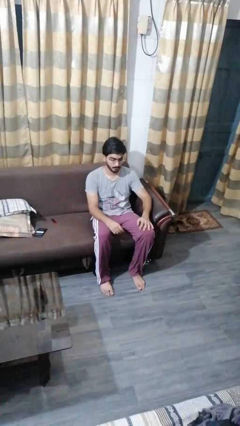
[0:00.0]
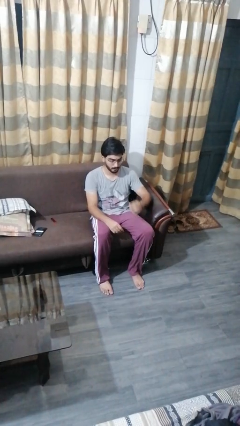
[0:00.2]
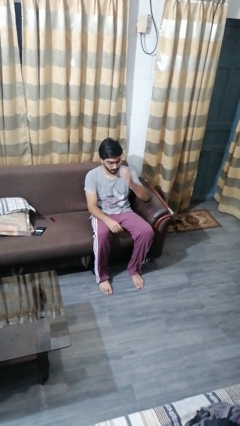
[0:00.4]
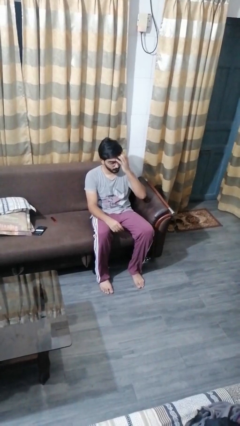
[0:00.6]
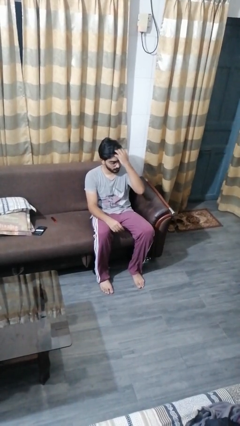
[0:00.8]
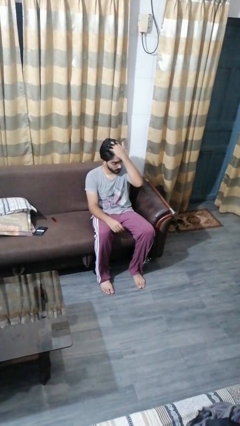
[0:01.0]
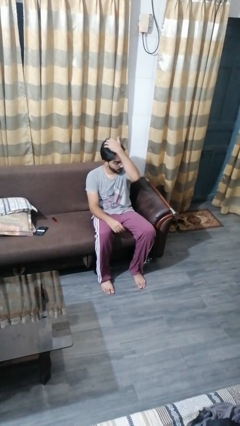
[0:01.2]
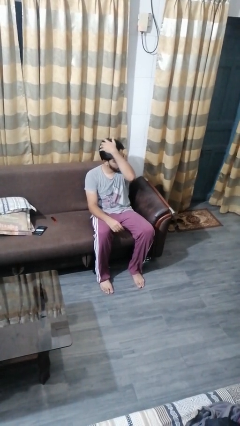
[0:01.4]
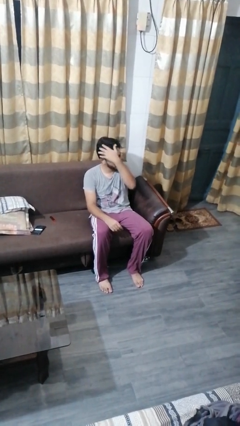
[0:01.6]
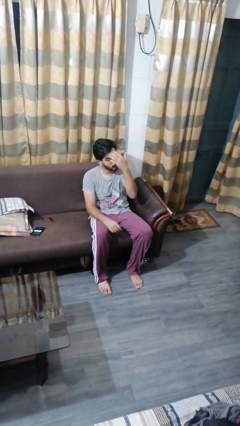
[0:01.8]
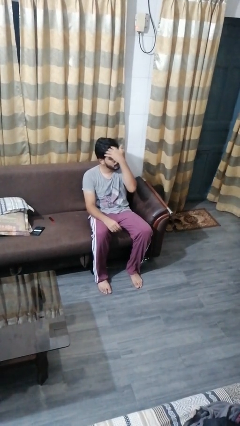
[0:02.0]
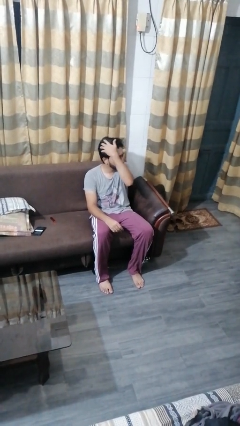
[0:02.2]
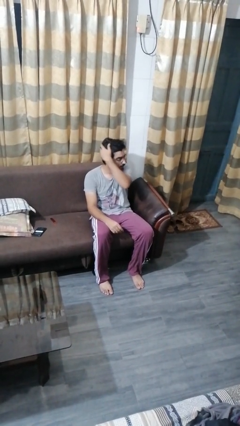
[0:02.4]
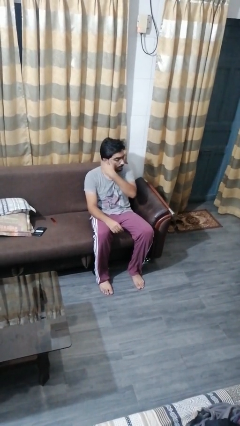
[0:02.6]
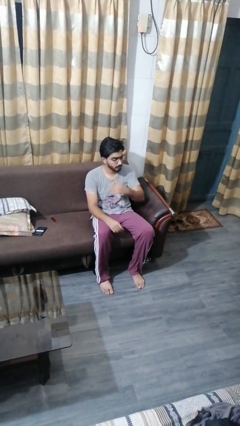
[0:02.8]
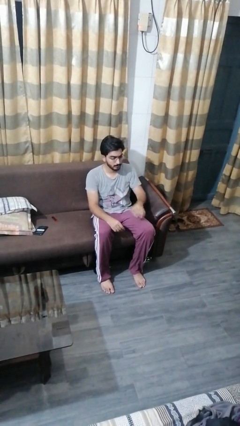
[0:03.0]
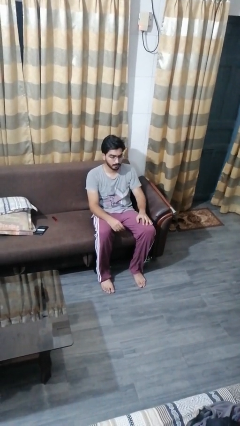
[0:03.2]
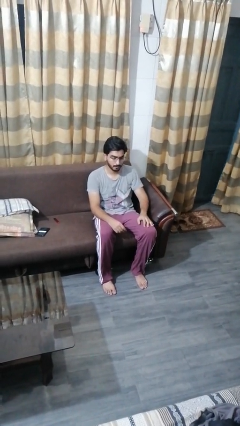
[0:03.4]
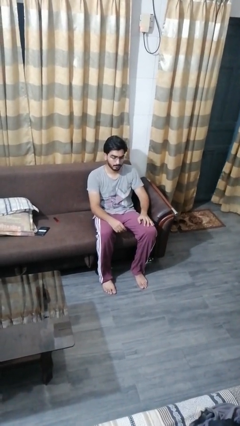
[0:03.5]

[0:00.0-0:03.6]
person strokes hair

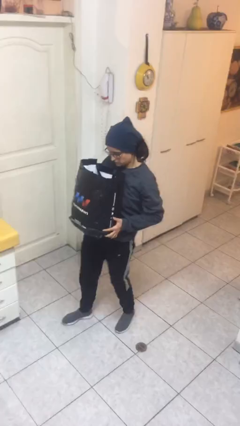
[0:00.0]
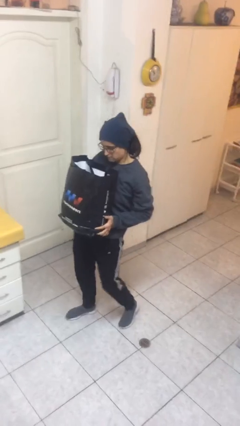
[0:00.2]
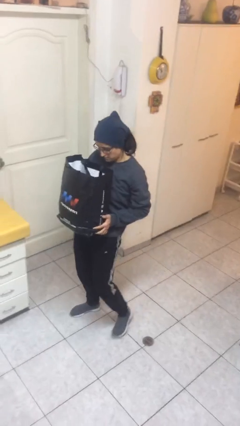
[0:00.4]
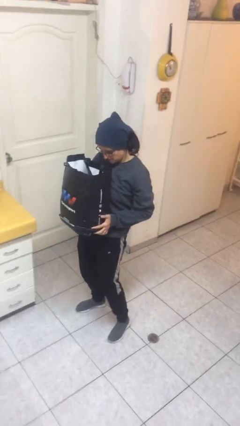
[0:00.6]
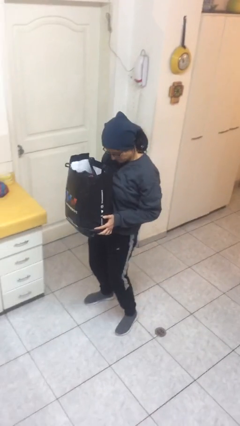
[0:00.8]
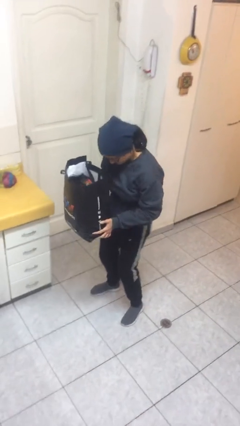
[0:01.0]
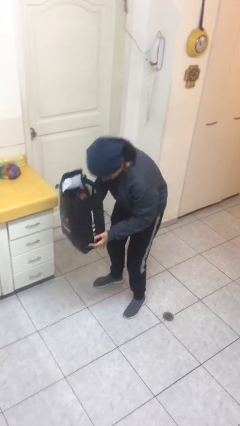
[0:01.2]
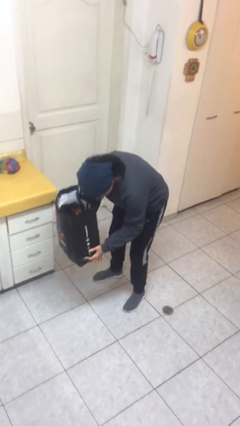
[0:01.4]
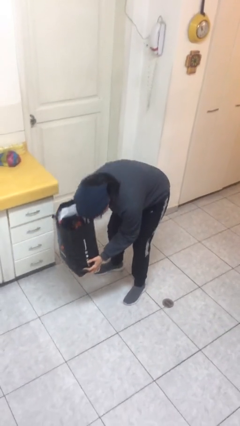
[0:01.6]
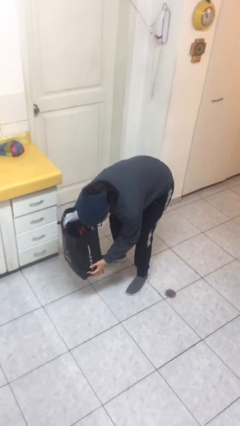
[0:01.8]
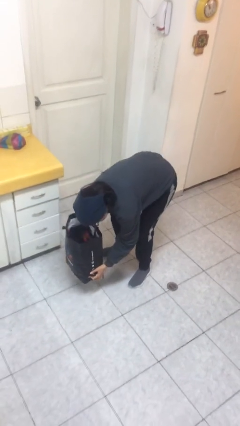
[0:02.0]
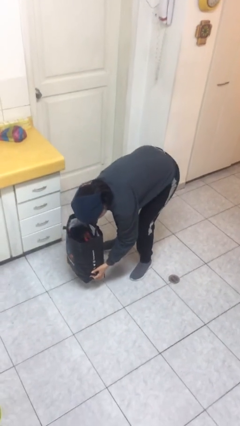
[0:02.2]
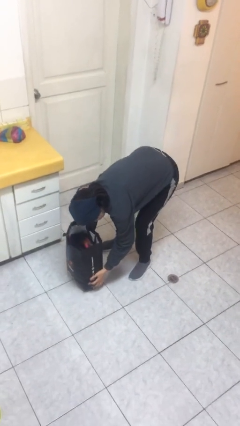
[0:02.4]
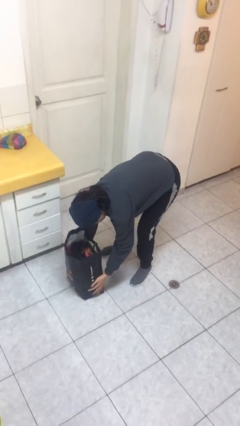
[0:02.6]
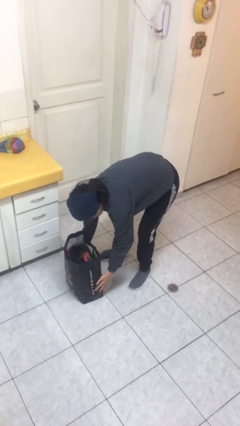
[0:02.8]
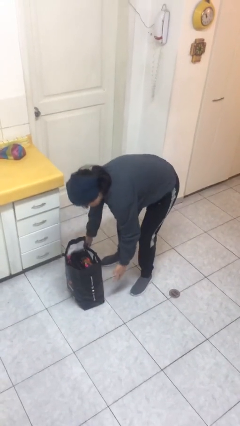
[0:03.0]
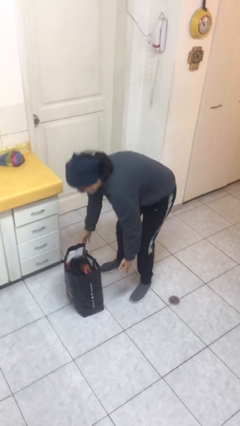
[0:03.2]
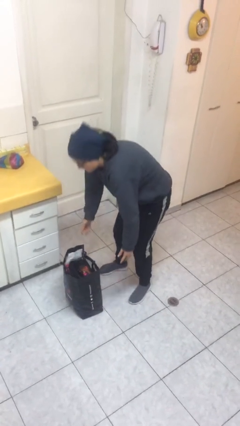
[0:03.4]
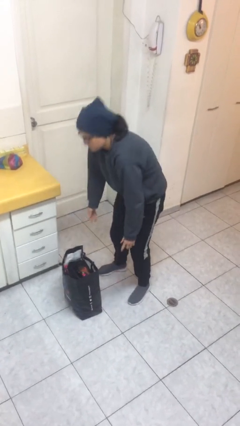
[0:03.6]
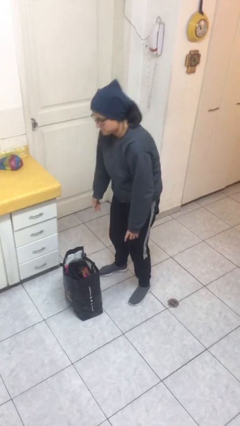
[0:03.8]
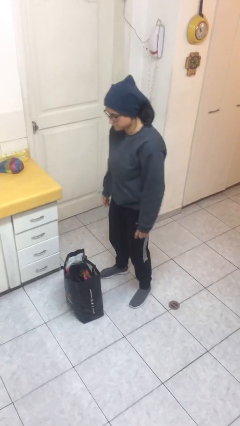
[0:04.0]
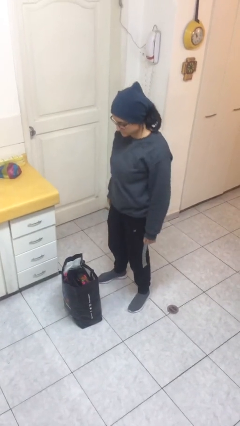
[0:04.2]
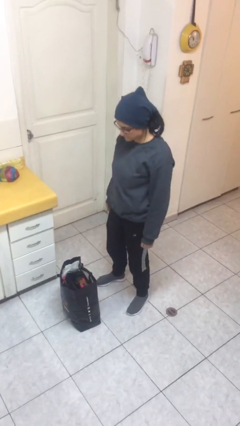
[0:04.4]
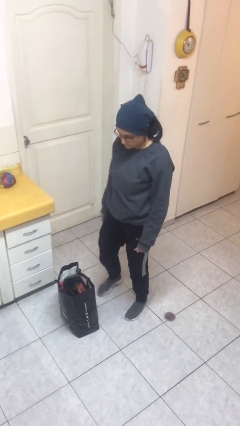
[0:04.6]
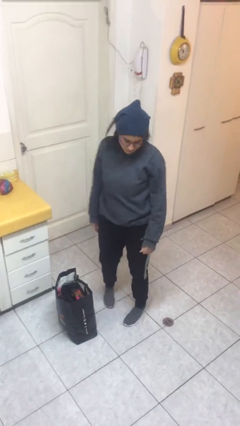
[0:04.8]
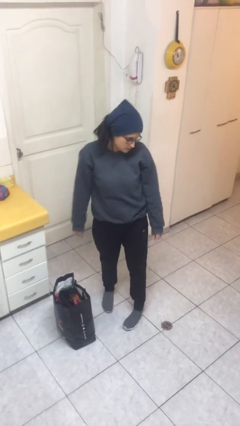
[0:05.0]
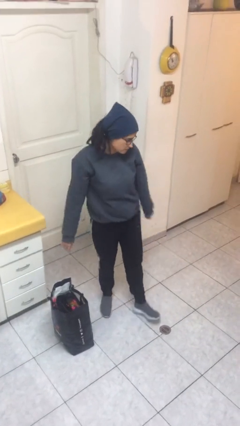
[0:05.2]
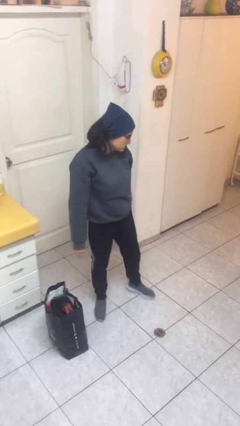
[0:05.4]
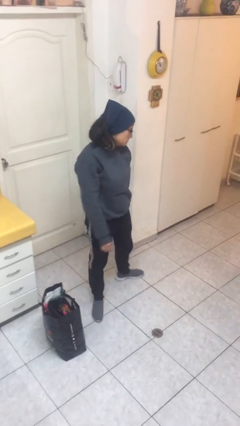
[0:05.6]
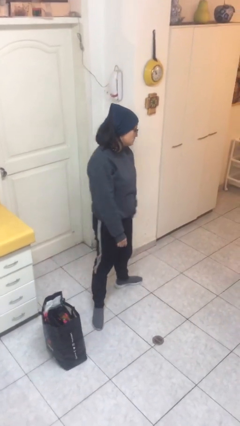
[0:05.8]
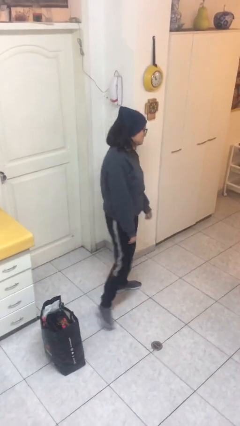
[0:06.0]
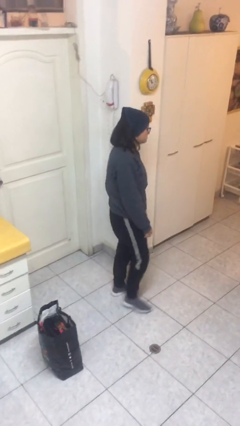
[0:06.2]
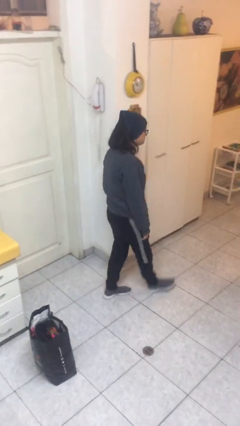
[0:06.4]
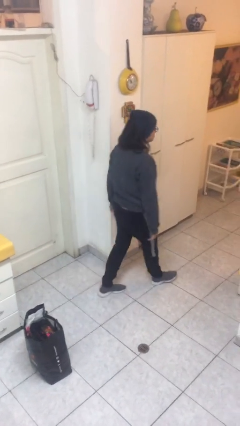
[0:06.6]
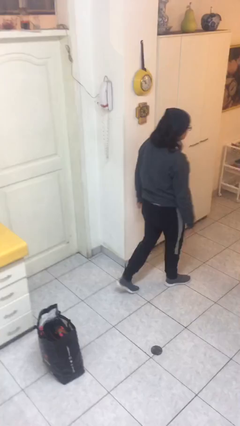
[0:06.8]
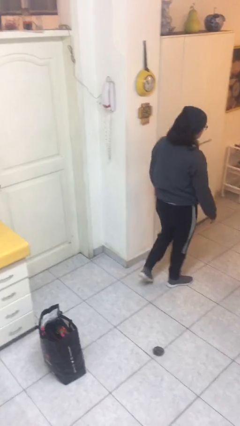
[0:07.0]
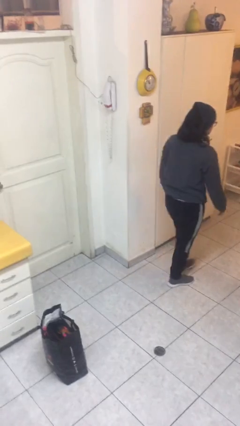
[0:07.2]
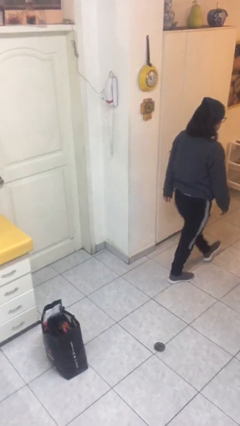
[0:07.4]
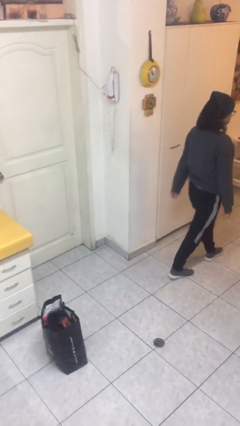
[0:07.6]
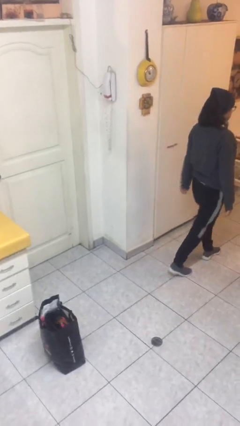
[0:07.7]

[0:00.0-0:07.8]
person puts down object on floor

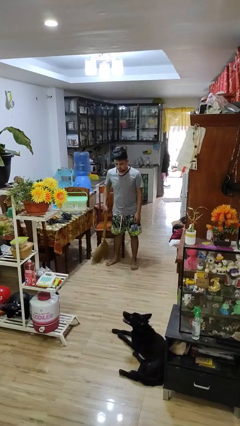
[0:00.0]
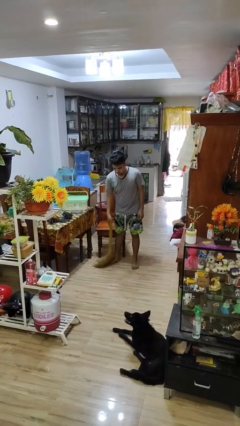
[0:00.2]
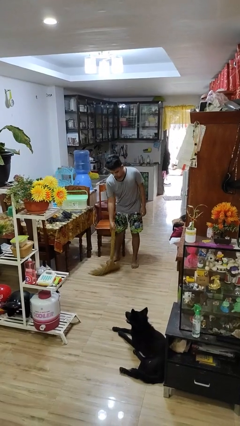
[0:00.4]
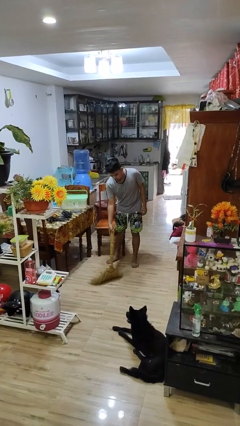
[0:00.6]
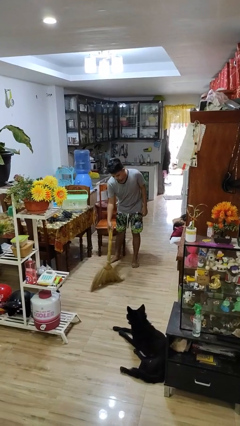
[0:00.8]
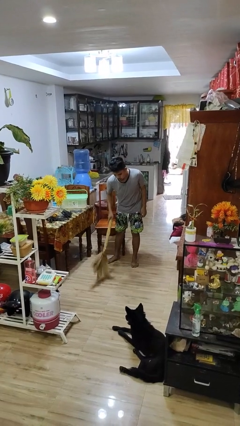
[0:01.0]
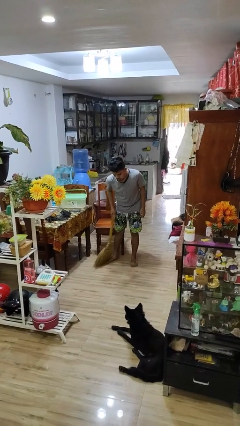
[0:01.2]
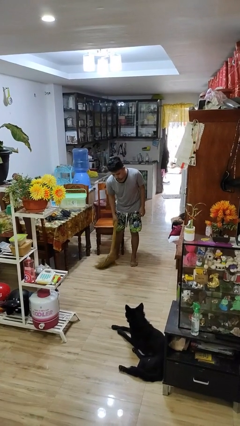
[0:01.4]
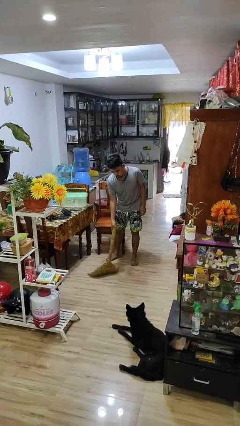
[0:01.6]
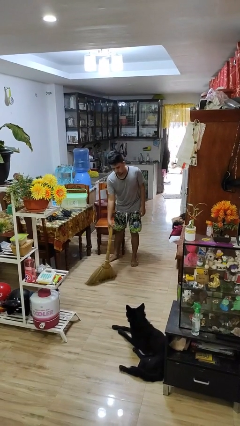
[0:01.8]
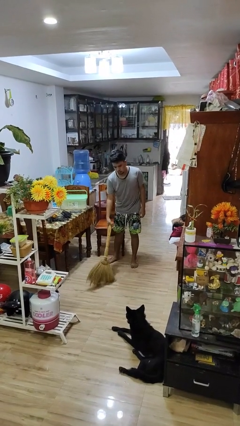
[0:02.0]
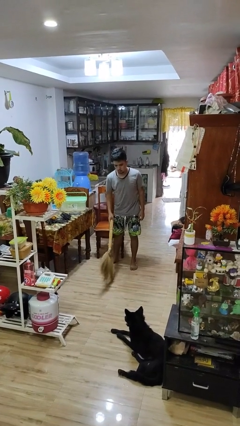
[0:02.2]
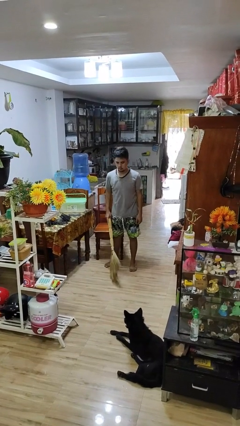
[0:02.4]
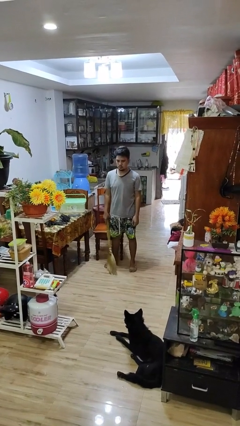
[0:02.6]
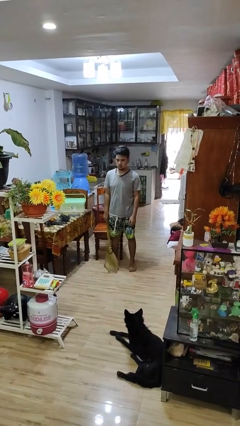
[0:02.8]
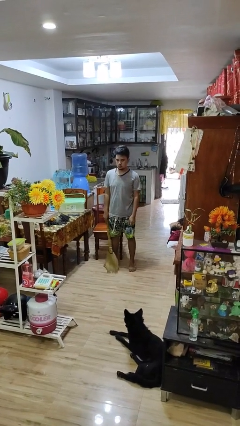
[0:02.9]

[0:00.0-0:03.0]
person sweeps floor

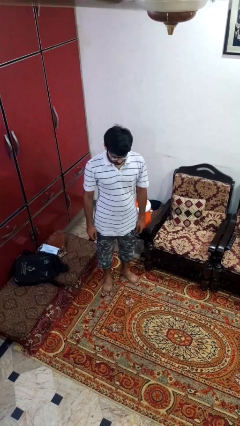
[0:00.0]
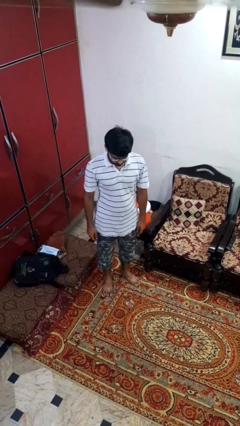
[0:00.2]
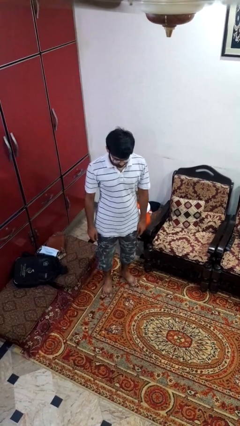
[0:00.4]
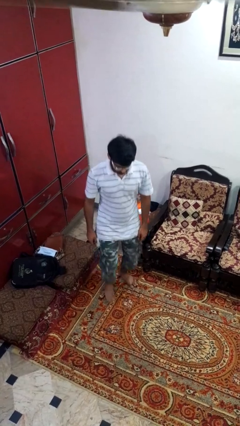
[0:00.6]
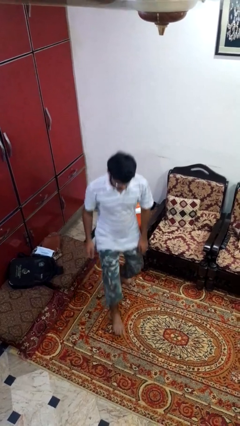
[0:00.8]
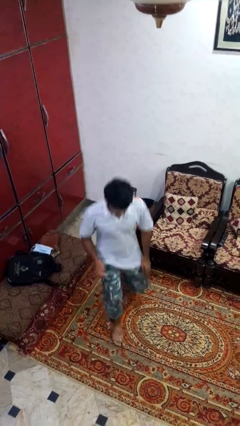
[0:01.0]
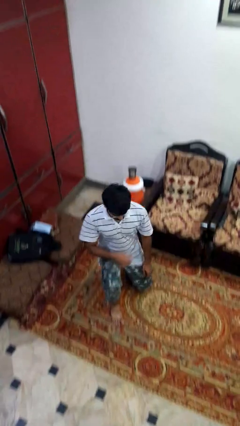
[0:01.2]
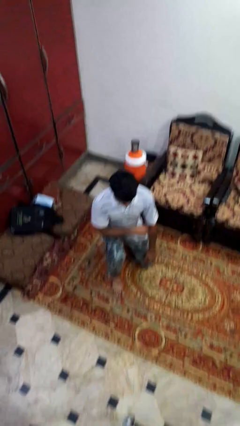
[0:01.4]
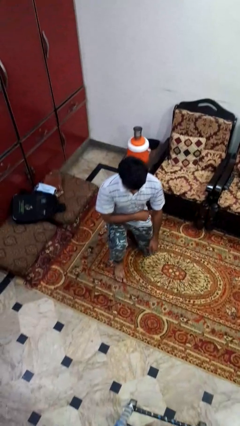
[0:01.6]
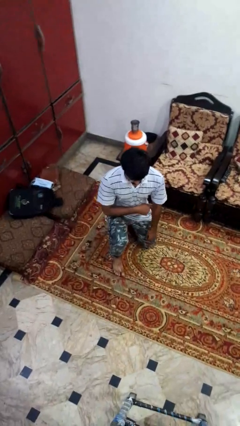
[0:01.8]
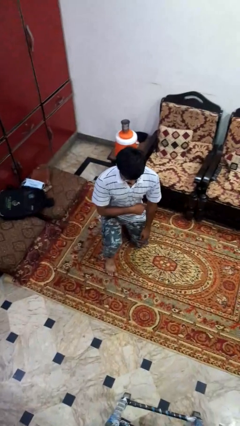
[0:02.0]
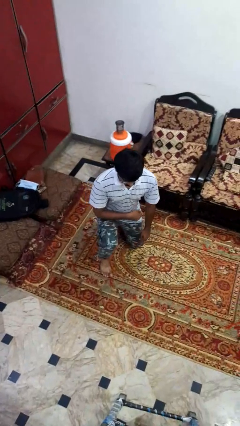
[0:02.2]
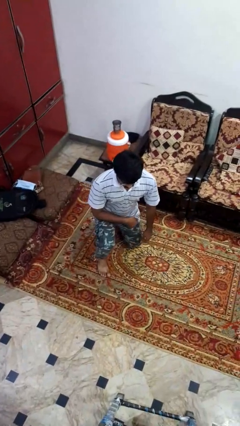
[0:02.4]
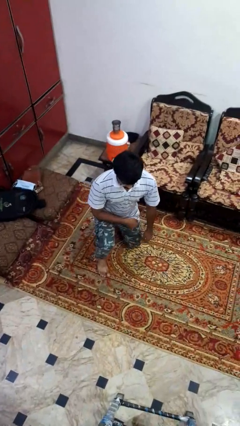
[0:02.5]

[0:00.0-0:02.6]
person kneels

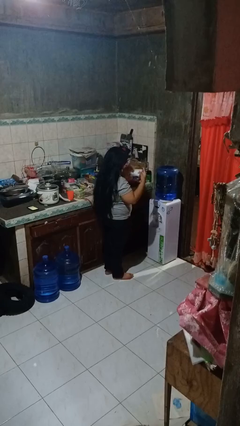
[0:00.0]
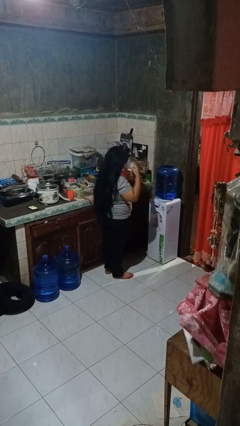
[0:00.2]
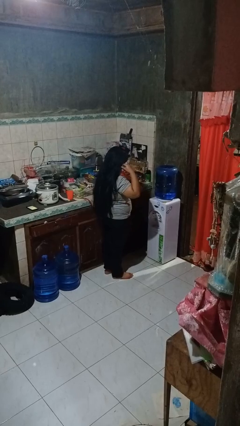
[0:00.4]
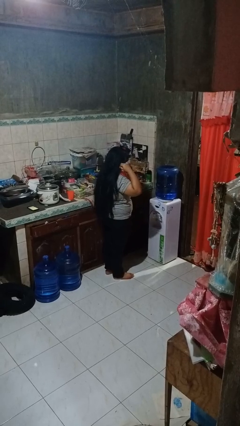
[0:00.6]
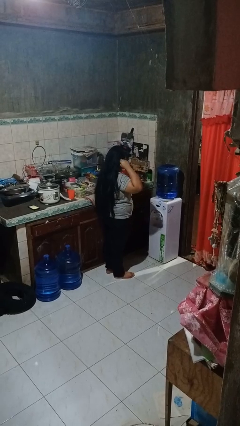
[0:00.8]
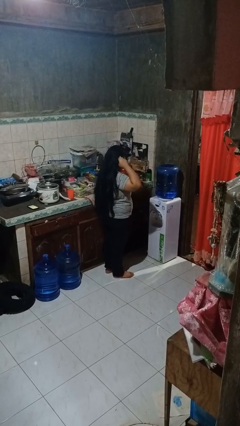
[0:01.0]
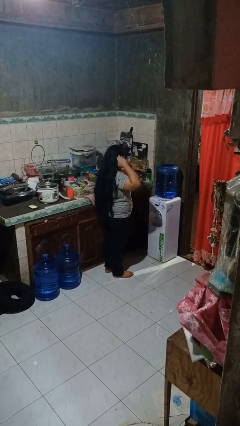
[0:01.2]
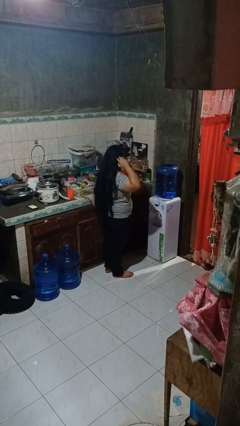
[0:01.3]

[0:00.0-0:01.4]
person puts on facemask
